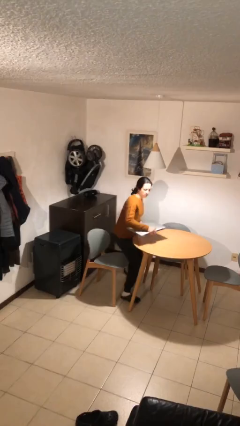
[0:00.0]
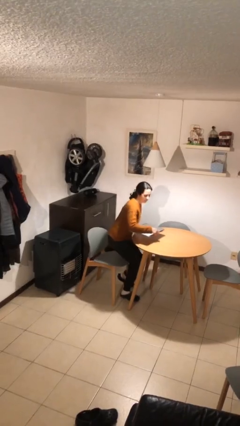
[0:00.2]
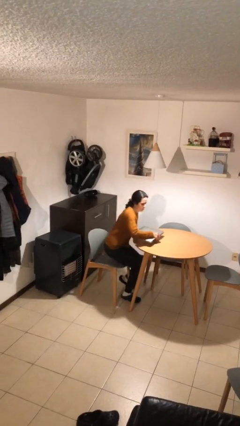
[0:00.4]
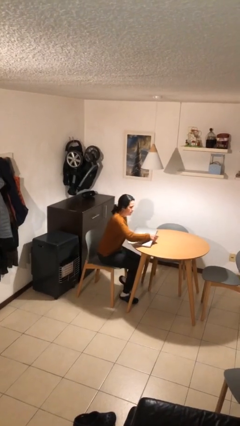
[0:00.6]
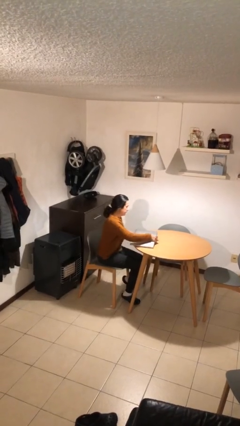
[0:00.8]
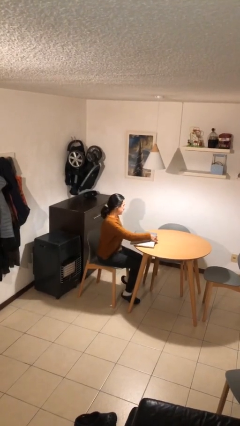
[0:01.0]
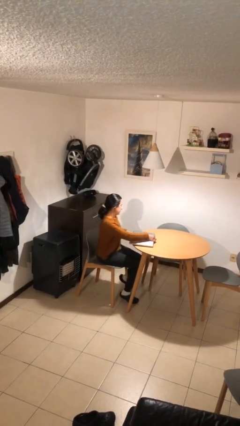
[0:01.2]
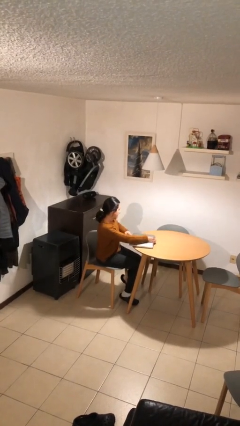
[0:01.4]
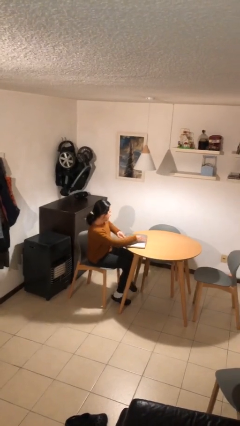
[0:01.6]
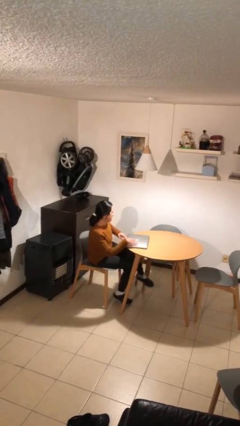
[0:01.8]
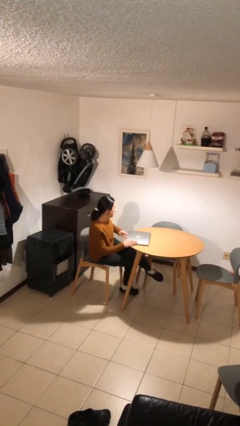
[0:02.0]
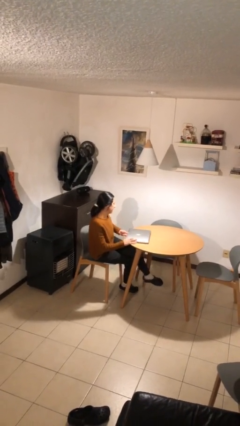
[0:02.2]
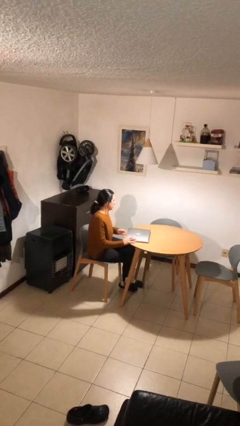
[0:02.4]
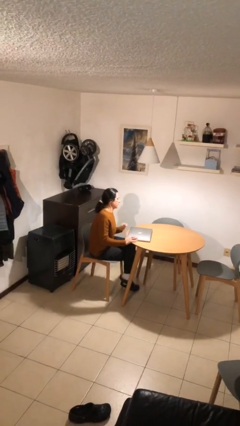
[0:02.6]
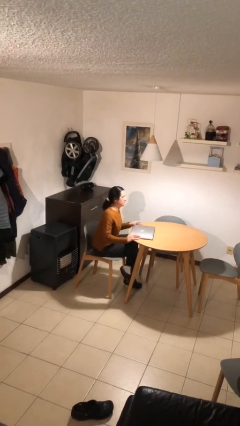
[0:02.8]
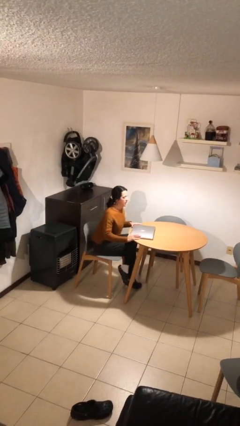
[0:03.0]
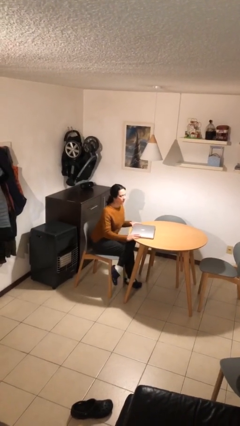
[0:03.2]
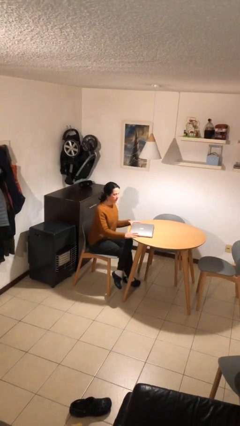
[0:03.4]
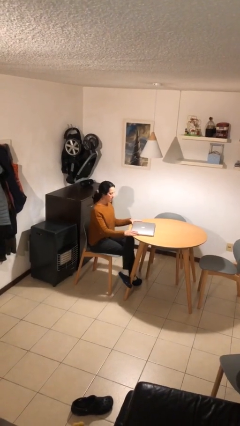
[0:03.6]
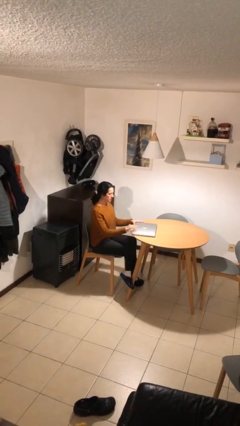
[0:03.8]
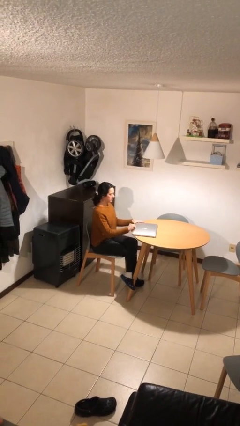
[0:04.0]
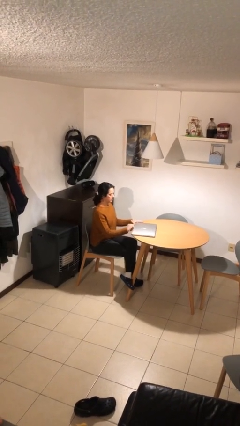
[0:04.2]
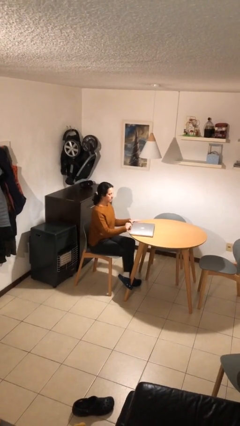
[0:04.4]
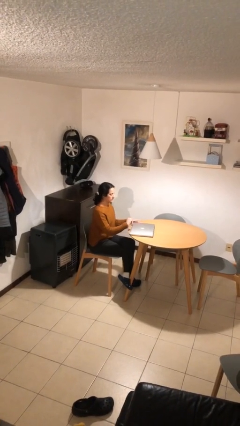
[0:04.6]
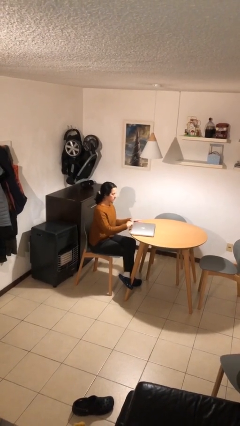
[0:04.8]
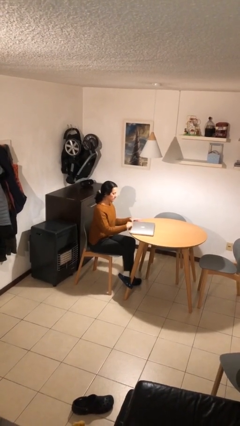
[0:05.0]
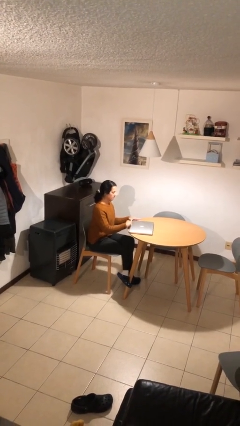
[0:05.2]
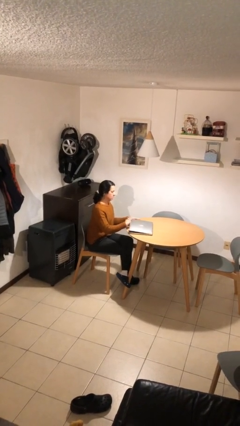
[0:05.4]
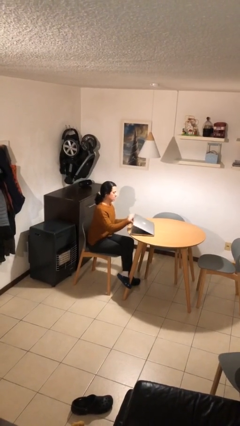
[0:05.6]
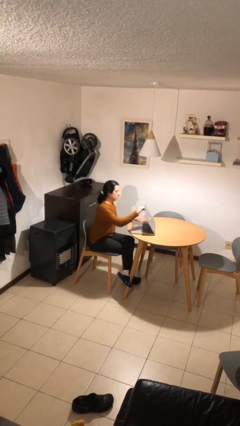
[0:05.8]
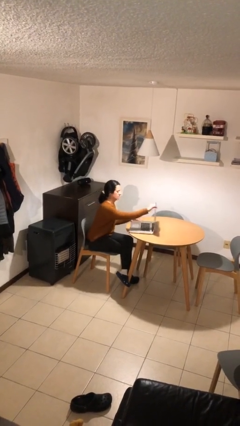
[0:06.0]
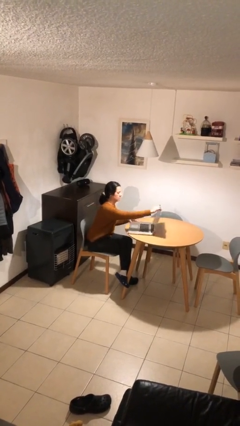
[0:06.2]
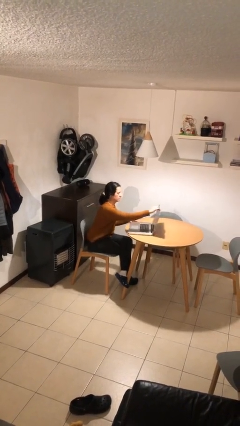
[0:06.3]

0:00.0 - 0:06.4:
person sits down

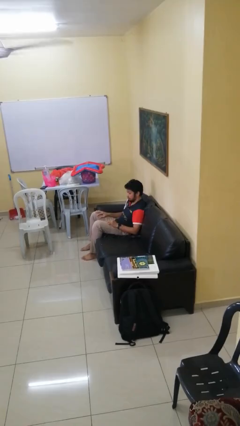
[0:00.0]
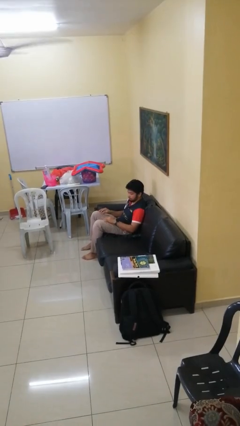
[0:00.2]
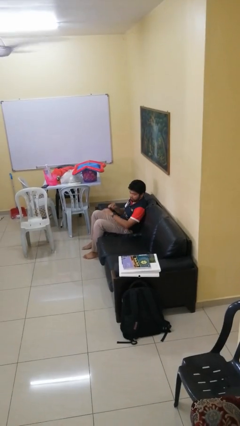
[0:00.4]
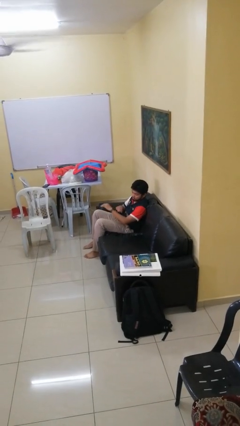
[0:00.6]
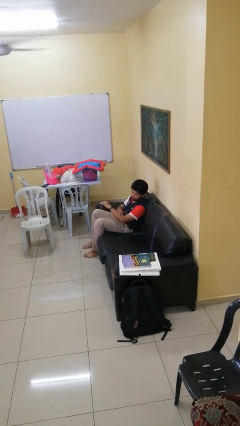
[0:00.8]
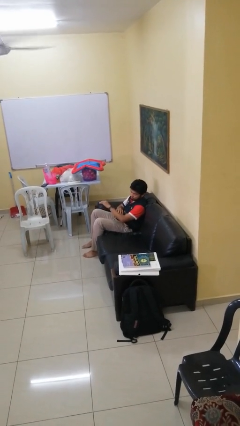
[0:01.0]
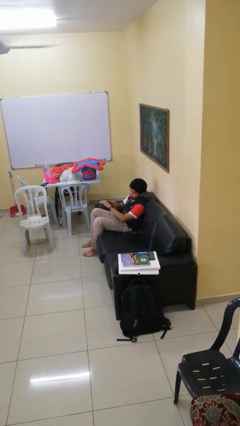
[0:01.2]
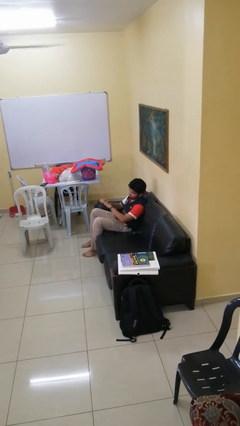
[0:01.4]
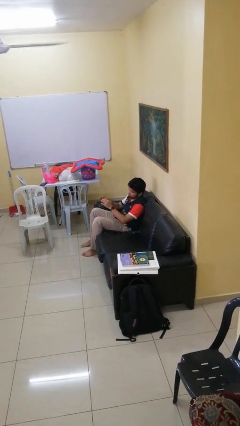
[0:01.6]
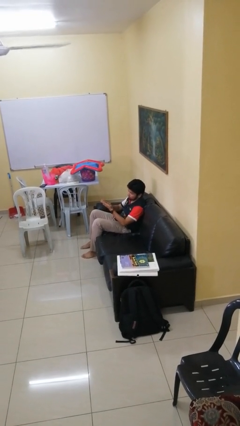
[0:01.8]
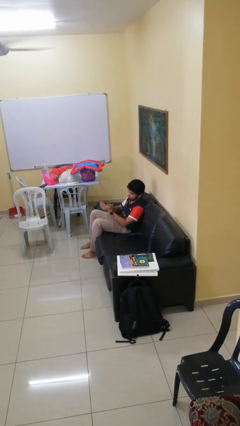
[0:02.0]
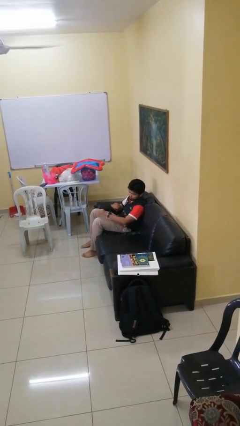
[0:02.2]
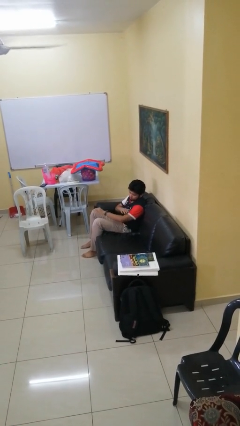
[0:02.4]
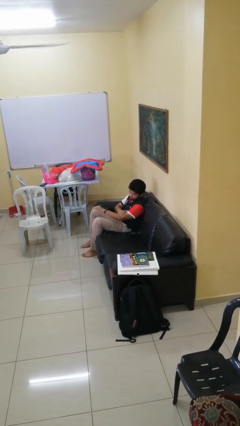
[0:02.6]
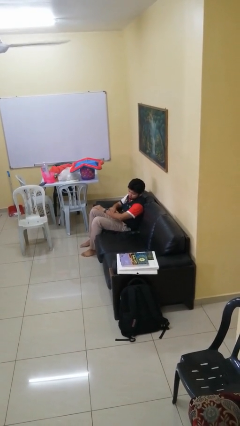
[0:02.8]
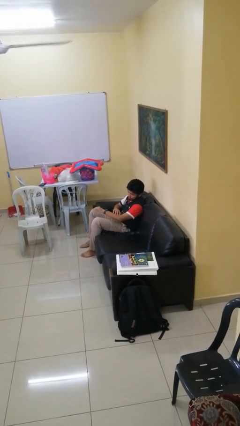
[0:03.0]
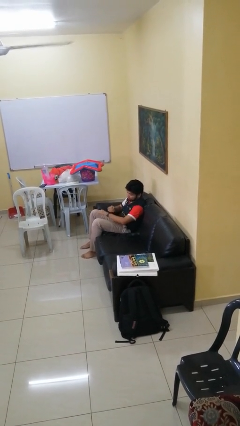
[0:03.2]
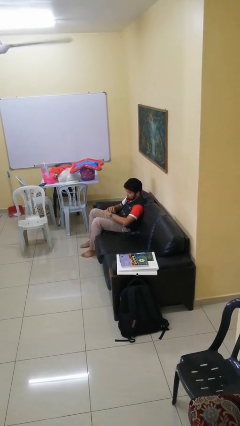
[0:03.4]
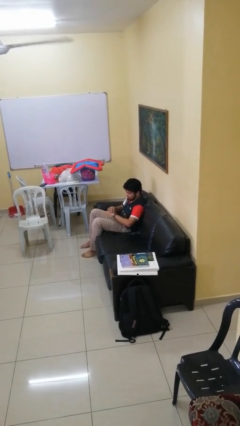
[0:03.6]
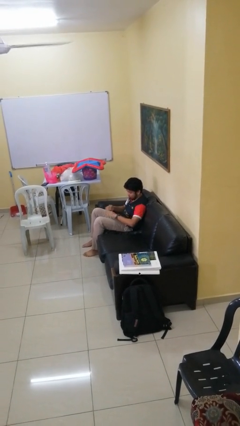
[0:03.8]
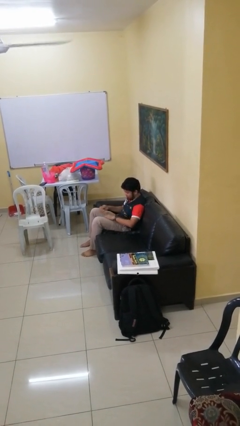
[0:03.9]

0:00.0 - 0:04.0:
person looks at hands in lap

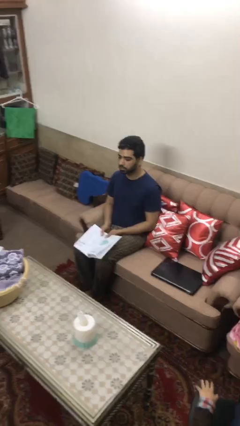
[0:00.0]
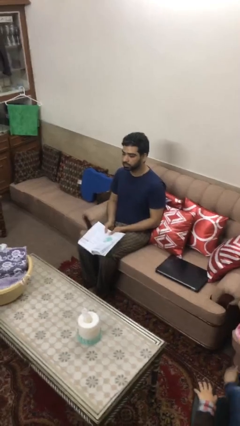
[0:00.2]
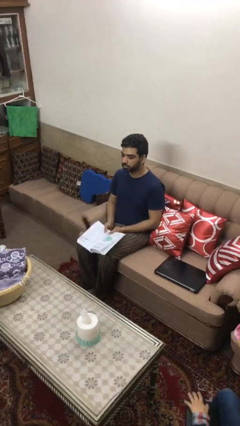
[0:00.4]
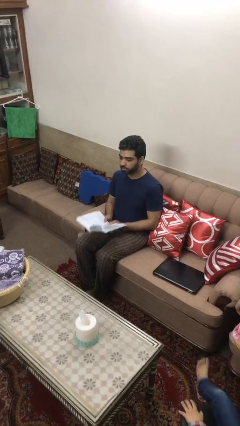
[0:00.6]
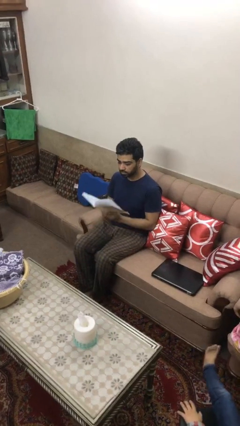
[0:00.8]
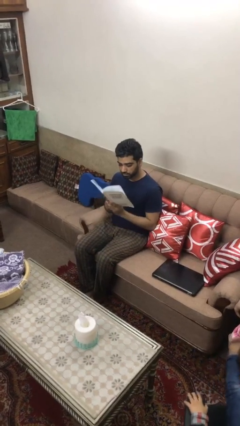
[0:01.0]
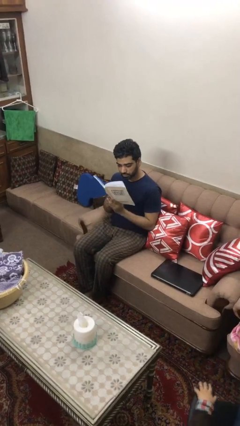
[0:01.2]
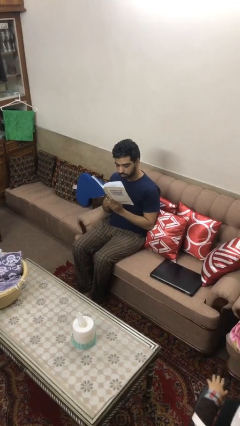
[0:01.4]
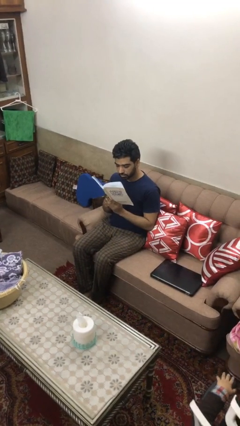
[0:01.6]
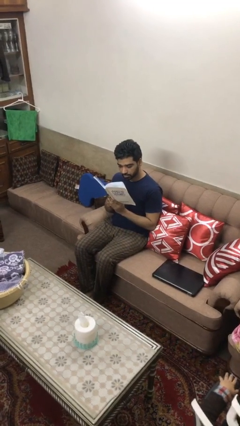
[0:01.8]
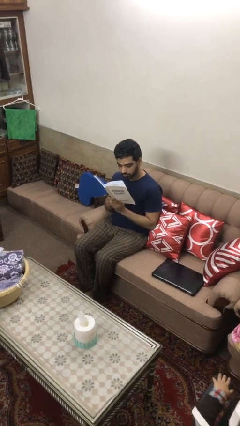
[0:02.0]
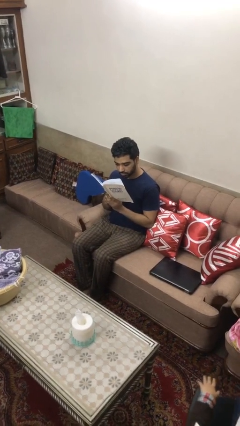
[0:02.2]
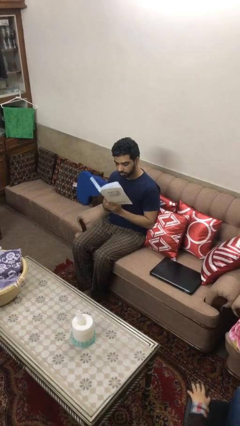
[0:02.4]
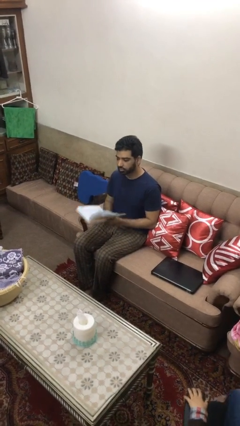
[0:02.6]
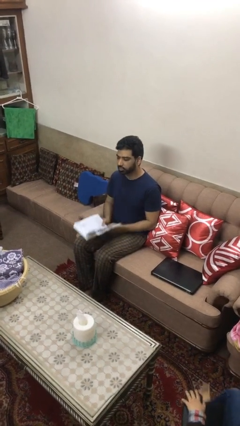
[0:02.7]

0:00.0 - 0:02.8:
person reads document

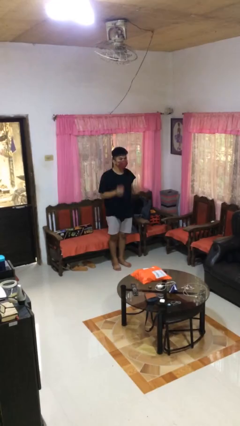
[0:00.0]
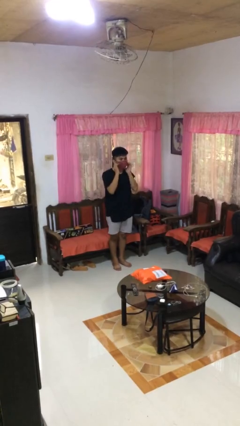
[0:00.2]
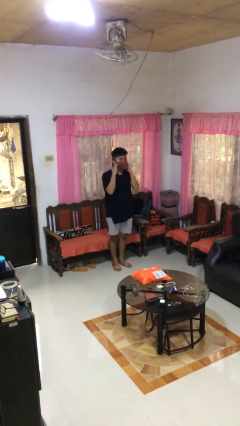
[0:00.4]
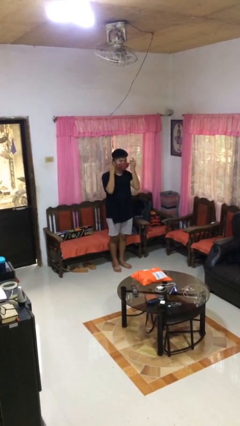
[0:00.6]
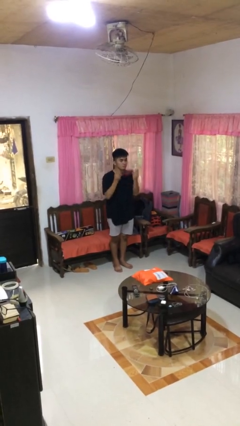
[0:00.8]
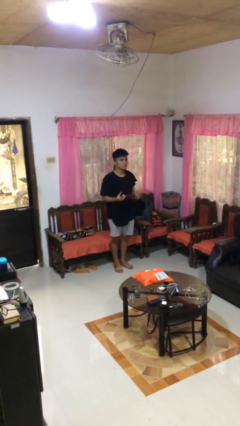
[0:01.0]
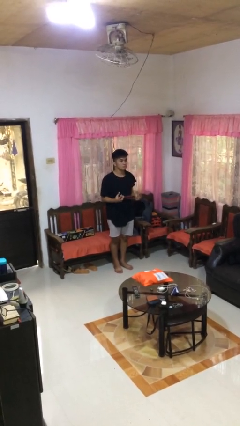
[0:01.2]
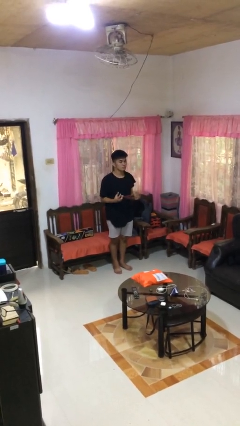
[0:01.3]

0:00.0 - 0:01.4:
person takes off facemask

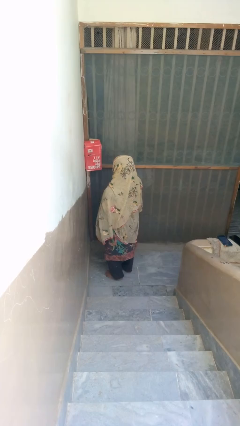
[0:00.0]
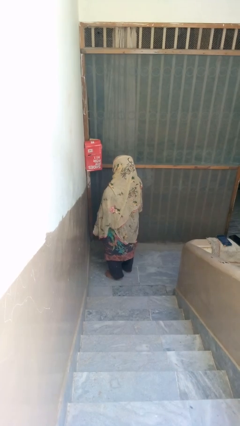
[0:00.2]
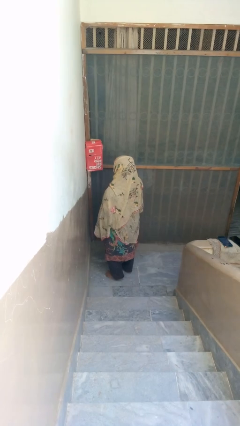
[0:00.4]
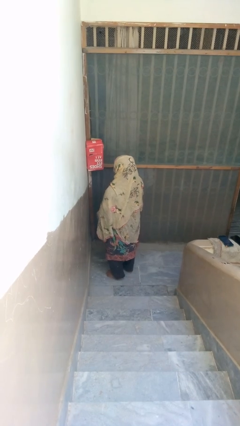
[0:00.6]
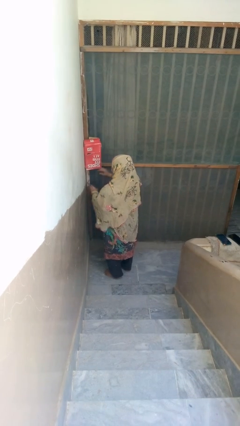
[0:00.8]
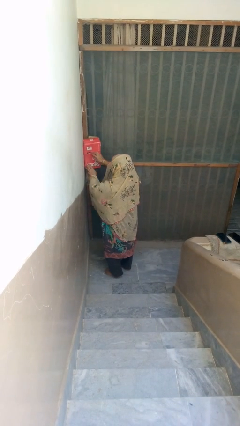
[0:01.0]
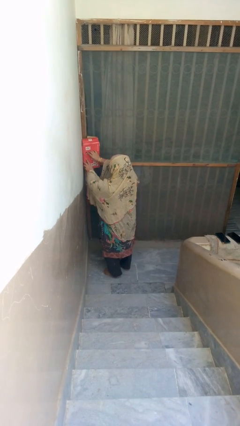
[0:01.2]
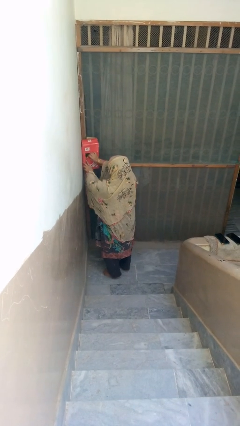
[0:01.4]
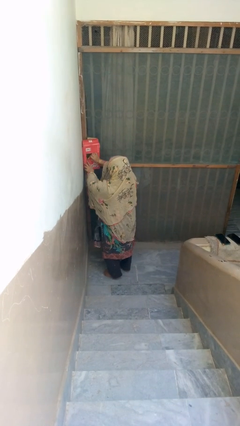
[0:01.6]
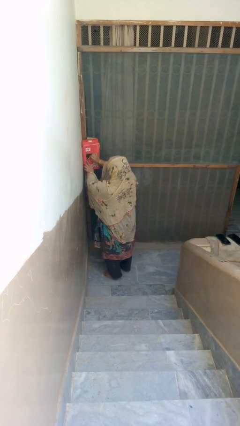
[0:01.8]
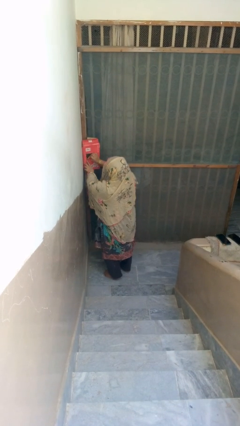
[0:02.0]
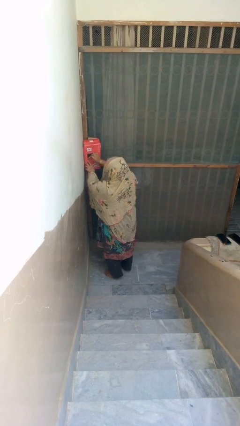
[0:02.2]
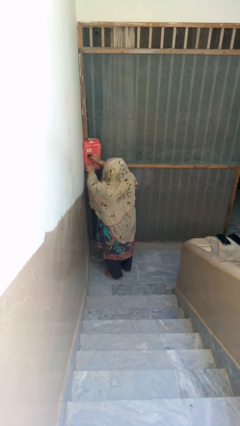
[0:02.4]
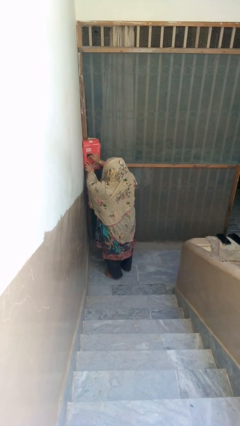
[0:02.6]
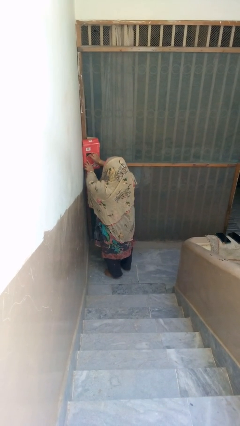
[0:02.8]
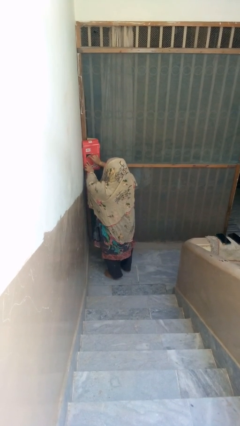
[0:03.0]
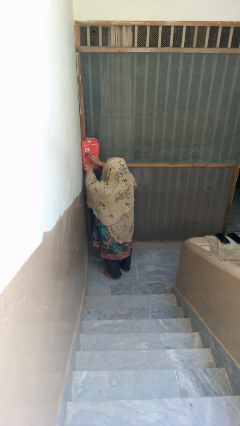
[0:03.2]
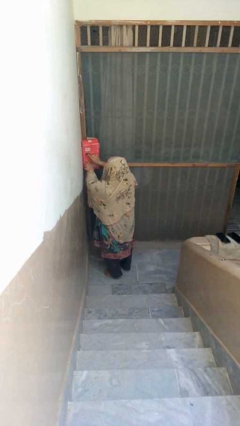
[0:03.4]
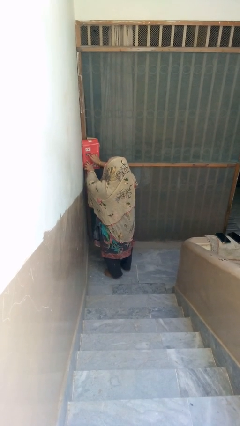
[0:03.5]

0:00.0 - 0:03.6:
person opens mailbox
